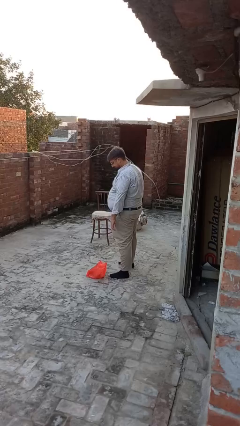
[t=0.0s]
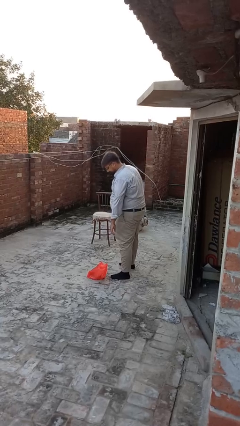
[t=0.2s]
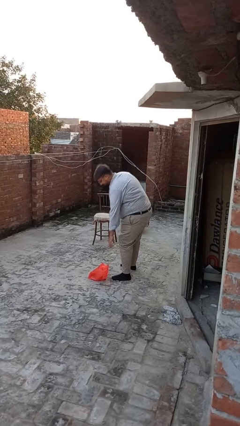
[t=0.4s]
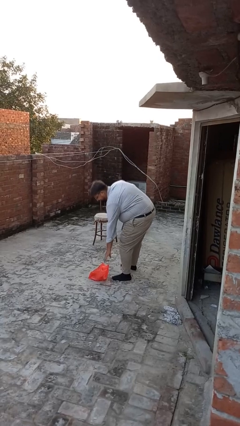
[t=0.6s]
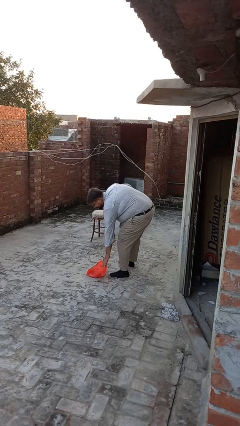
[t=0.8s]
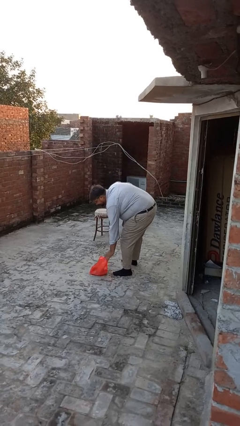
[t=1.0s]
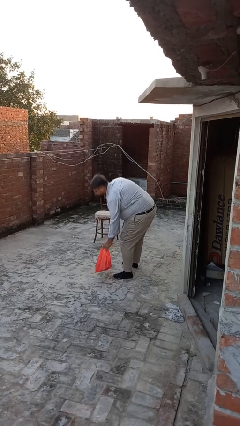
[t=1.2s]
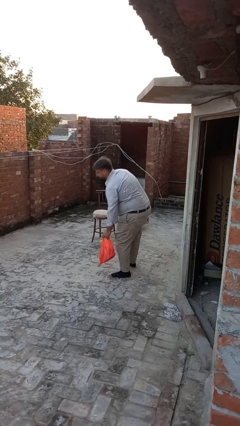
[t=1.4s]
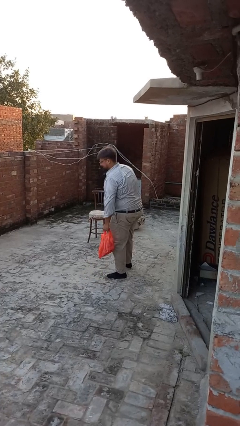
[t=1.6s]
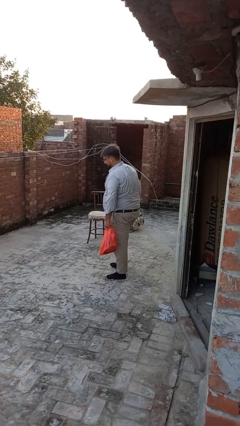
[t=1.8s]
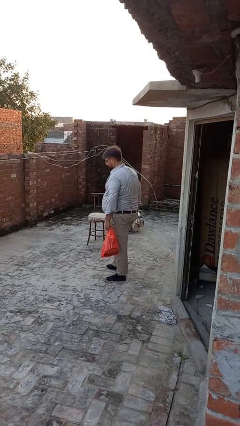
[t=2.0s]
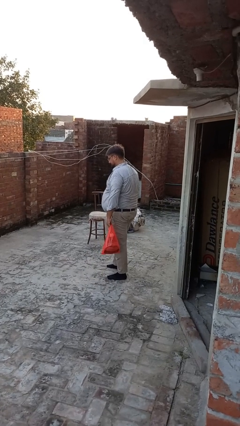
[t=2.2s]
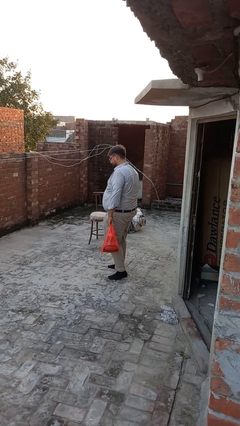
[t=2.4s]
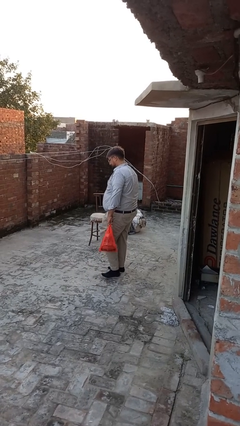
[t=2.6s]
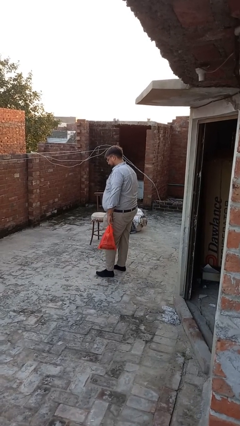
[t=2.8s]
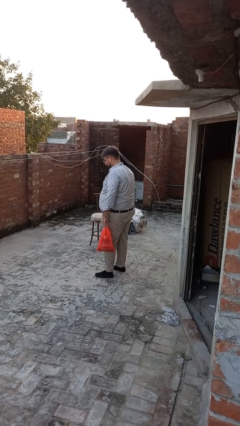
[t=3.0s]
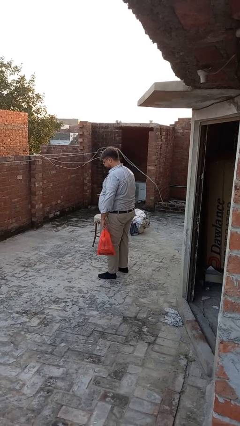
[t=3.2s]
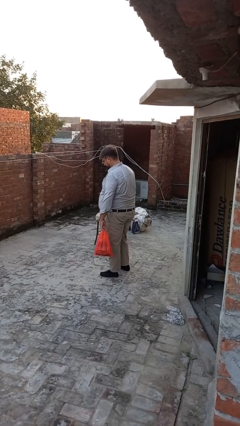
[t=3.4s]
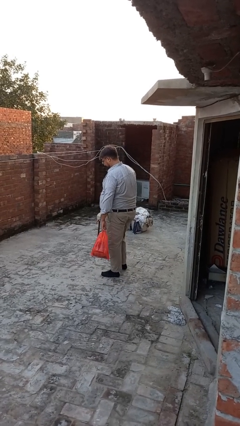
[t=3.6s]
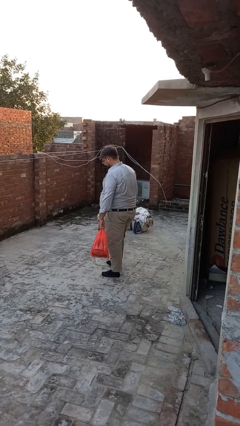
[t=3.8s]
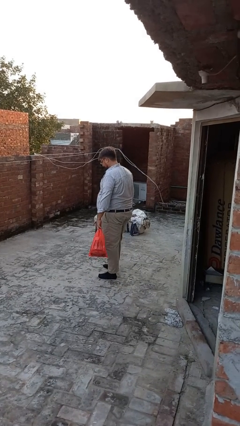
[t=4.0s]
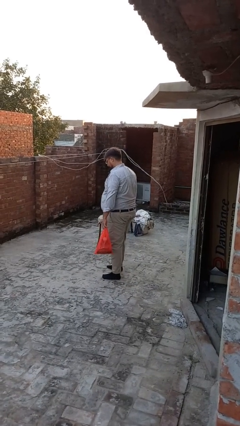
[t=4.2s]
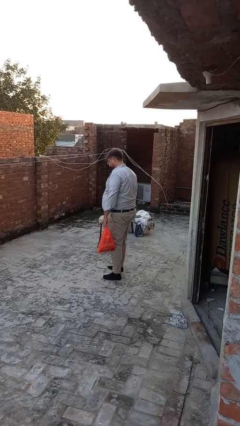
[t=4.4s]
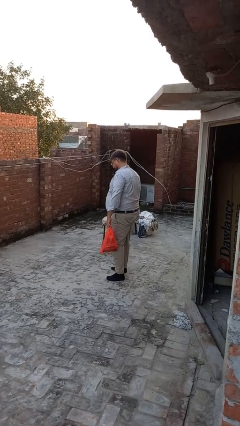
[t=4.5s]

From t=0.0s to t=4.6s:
person carries groceries

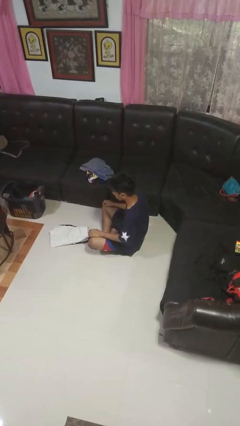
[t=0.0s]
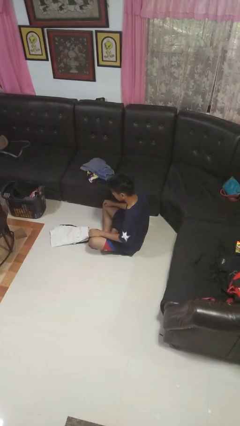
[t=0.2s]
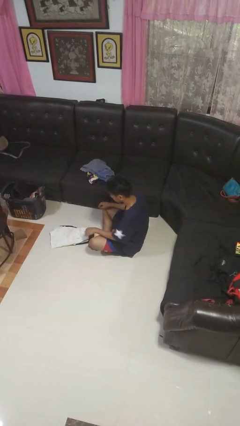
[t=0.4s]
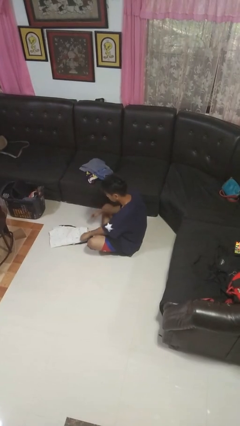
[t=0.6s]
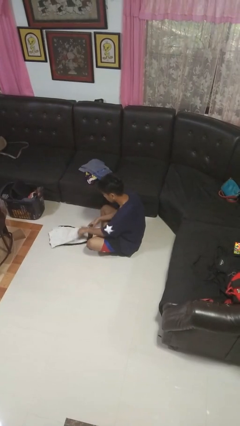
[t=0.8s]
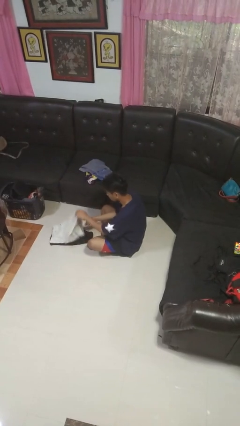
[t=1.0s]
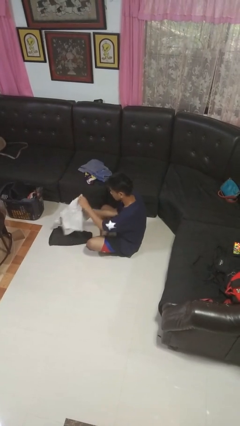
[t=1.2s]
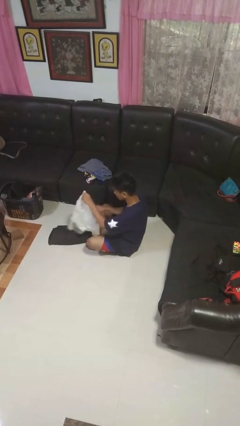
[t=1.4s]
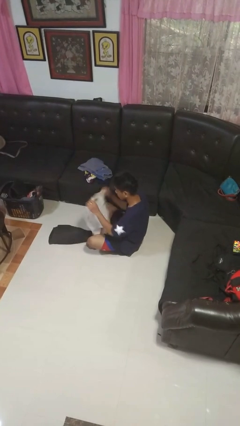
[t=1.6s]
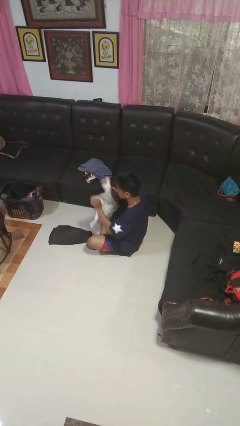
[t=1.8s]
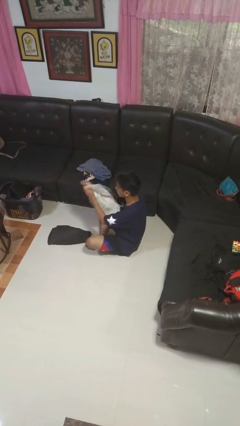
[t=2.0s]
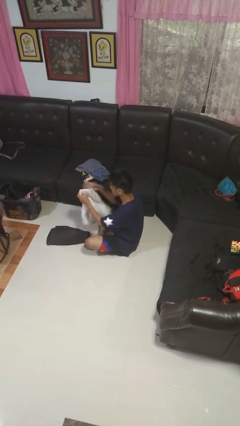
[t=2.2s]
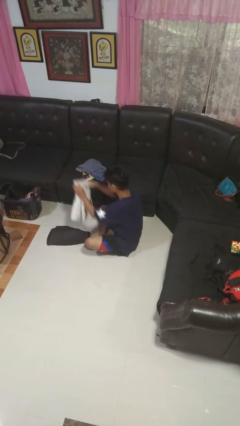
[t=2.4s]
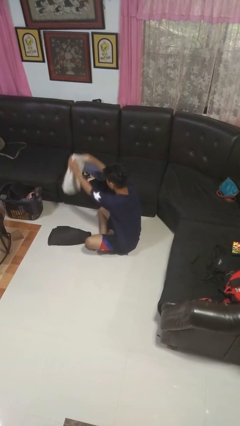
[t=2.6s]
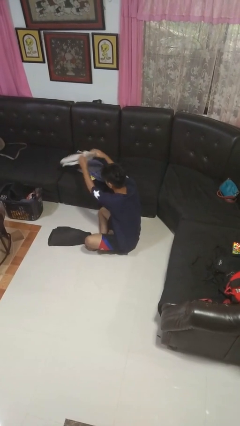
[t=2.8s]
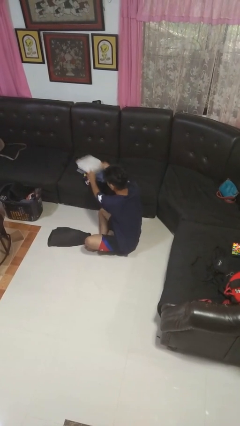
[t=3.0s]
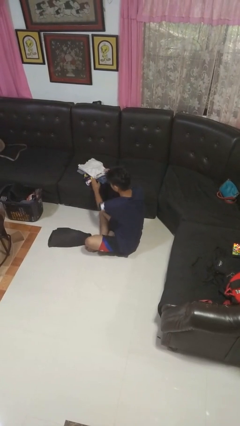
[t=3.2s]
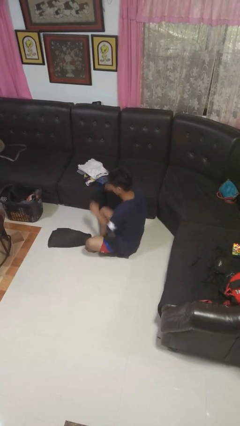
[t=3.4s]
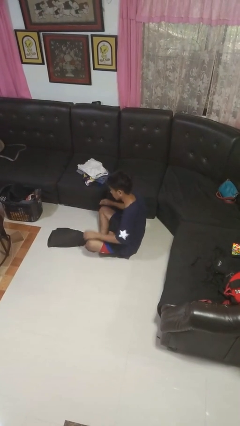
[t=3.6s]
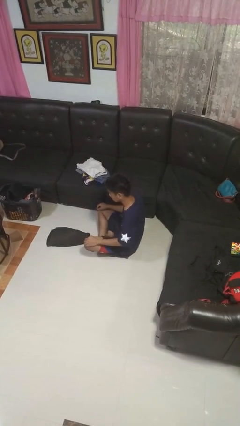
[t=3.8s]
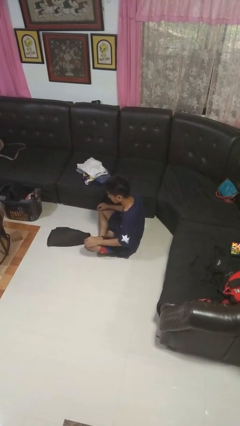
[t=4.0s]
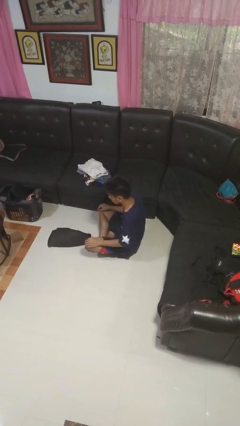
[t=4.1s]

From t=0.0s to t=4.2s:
person folds pants

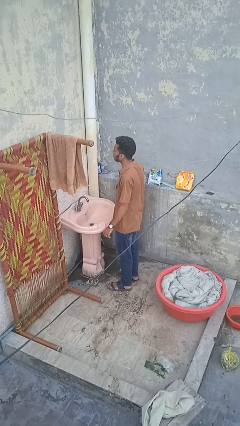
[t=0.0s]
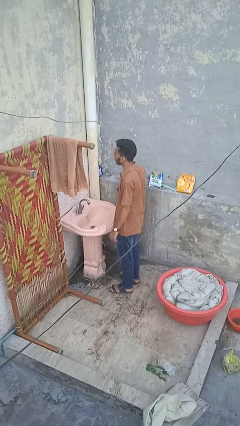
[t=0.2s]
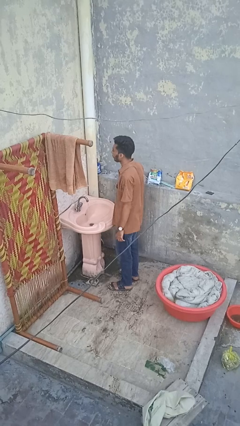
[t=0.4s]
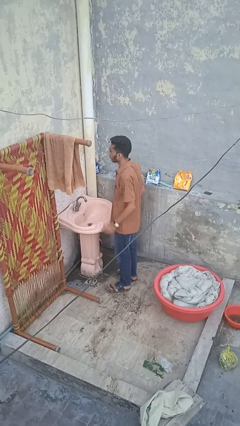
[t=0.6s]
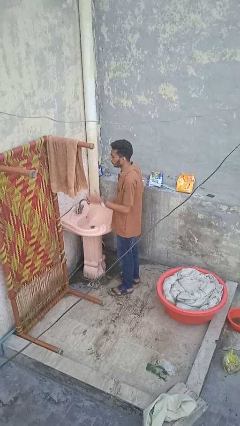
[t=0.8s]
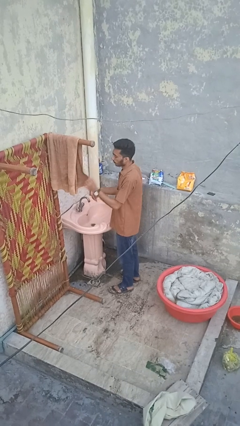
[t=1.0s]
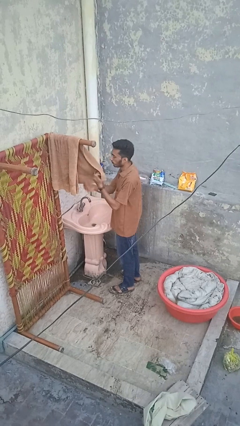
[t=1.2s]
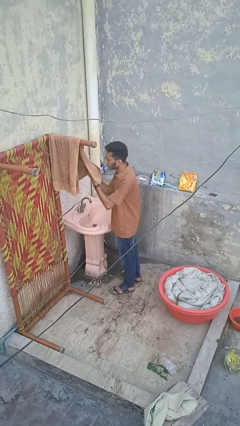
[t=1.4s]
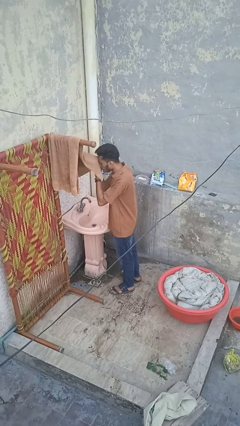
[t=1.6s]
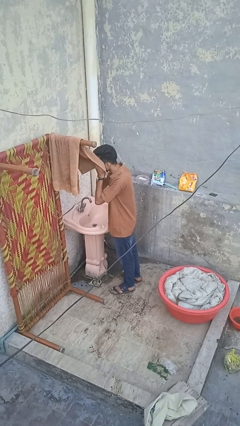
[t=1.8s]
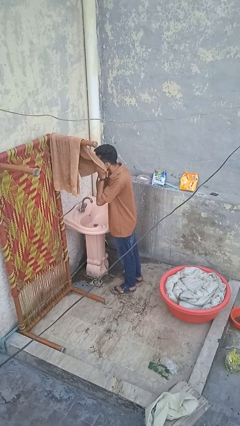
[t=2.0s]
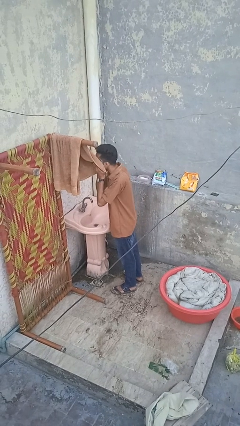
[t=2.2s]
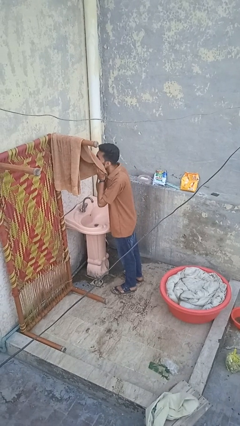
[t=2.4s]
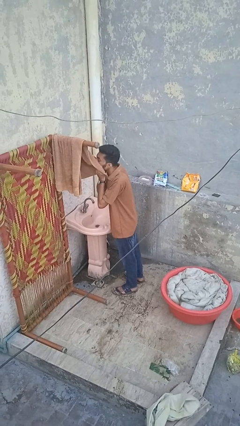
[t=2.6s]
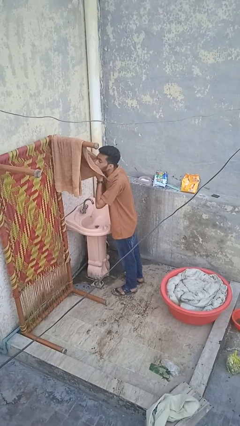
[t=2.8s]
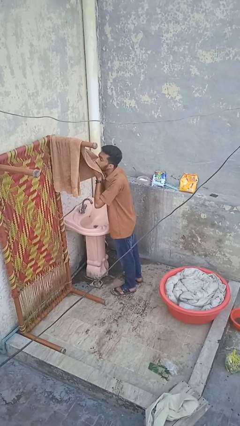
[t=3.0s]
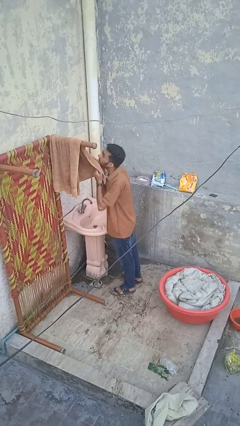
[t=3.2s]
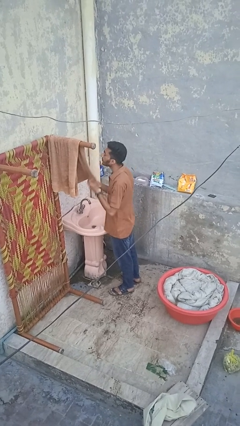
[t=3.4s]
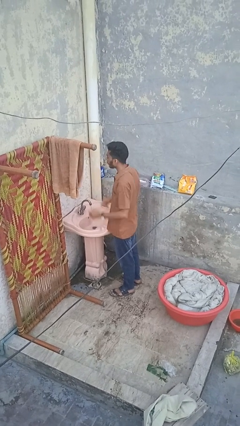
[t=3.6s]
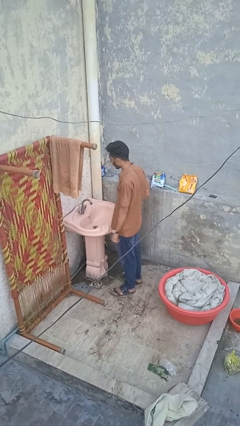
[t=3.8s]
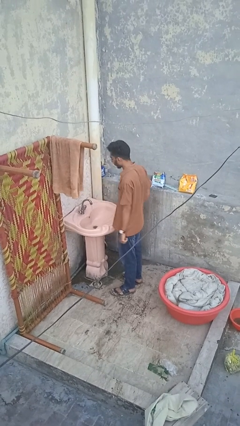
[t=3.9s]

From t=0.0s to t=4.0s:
person dries face with towel

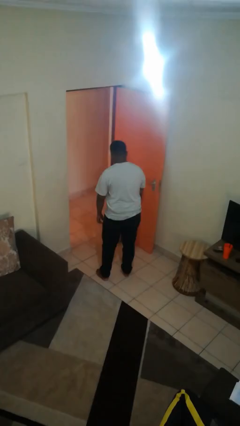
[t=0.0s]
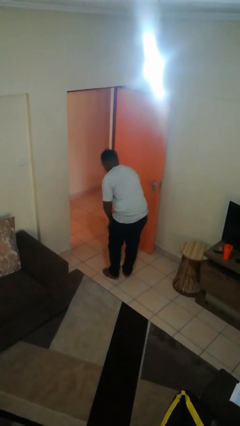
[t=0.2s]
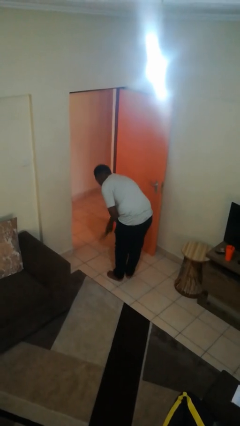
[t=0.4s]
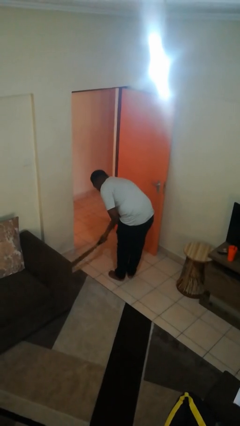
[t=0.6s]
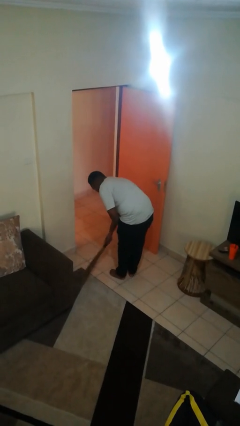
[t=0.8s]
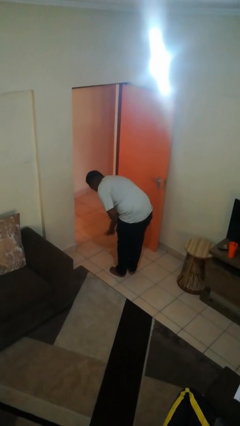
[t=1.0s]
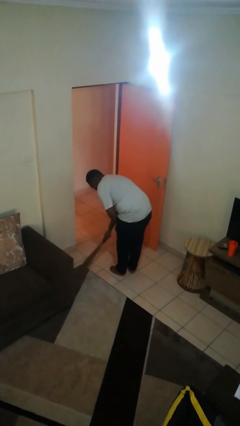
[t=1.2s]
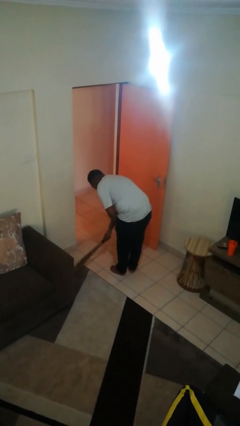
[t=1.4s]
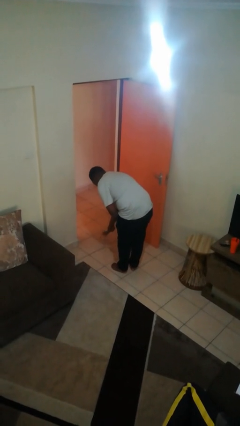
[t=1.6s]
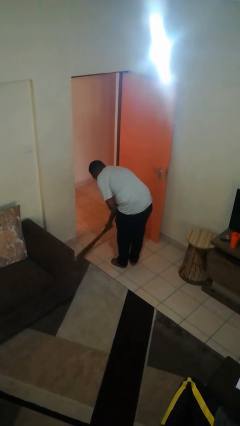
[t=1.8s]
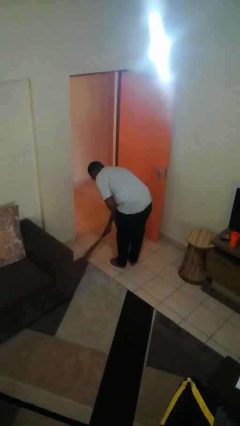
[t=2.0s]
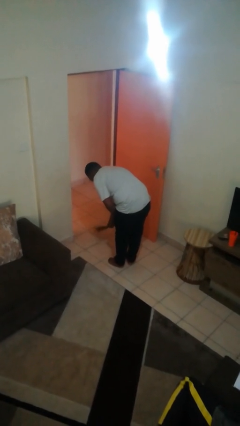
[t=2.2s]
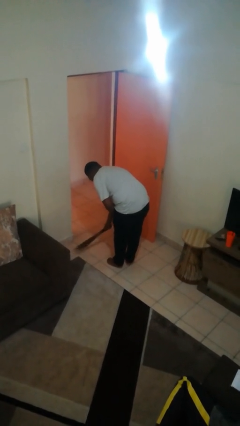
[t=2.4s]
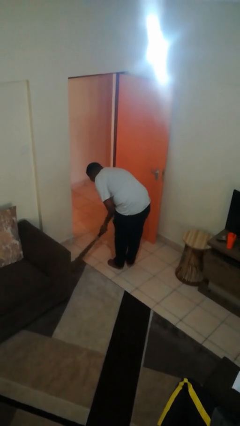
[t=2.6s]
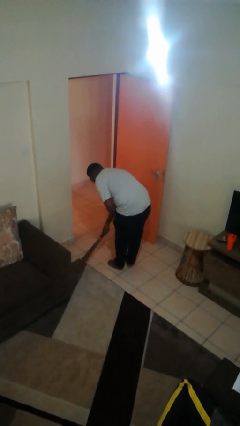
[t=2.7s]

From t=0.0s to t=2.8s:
person sweeps floor

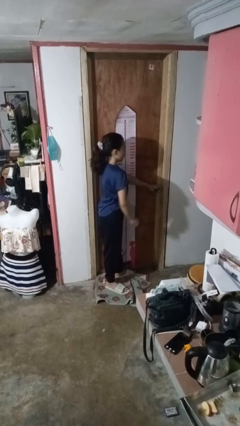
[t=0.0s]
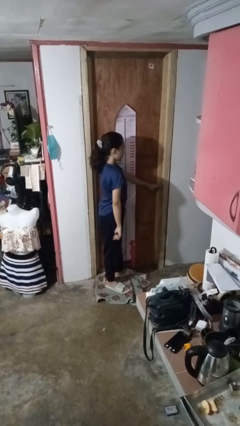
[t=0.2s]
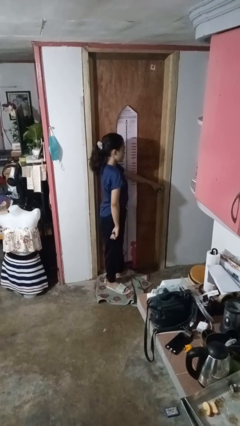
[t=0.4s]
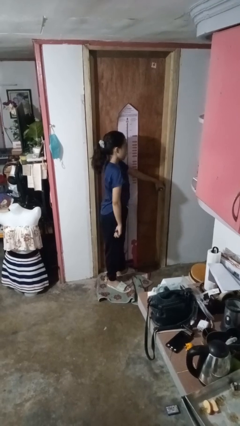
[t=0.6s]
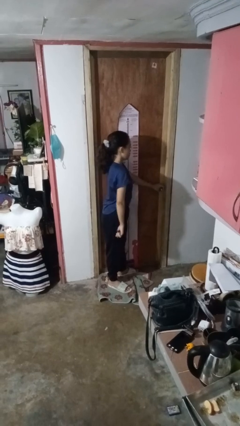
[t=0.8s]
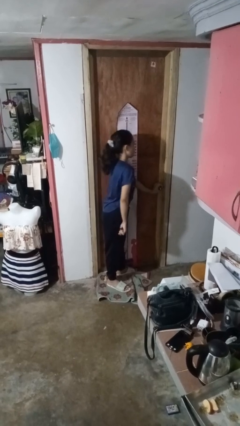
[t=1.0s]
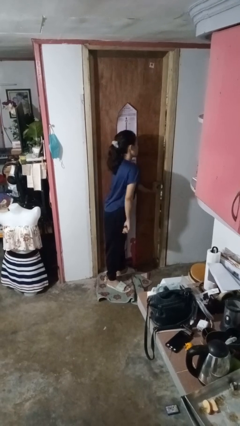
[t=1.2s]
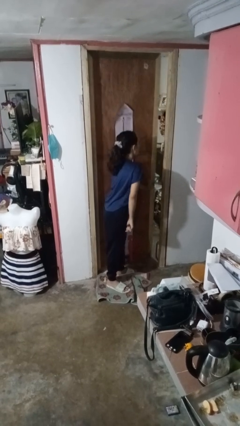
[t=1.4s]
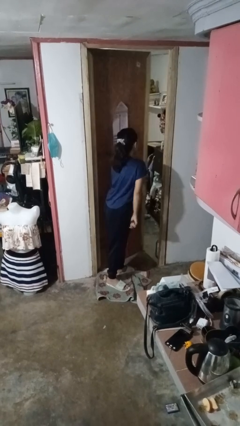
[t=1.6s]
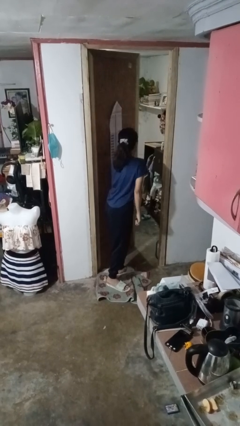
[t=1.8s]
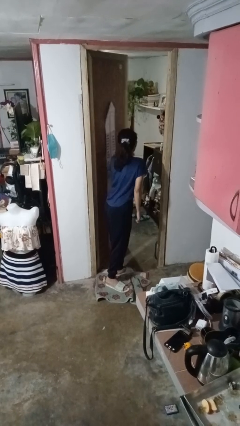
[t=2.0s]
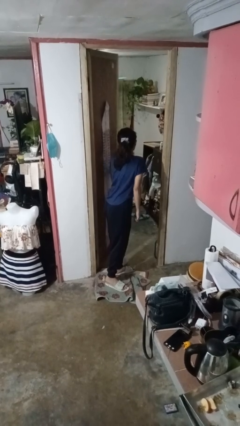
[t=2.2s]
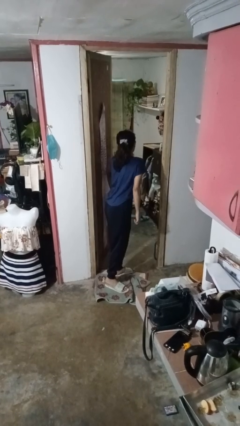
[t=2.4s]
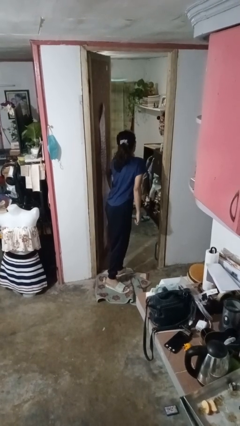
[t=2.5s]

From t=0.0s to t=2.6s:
person opens facility door
